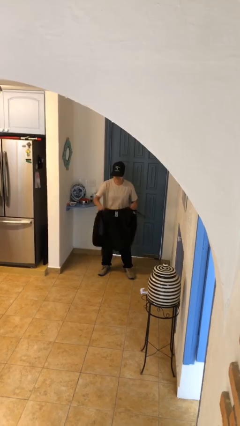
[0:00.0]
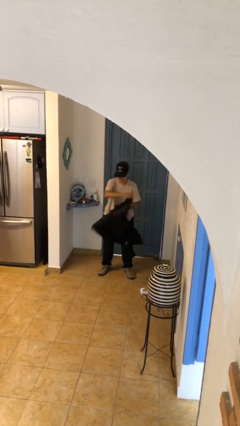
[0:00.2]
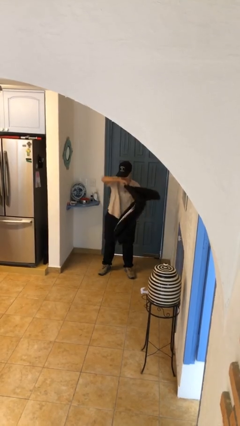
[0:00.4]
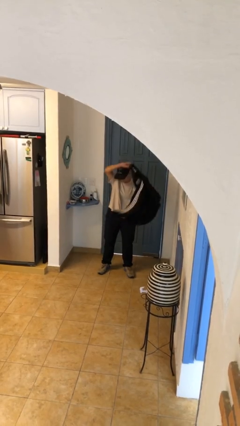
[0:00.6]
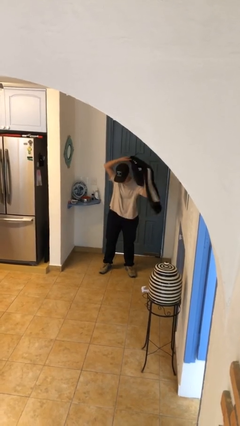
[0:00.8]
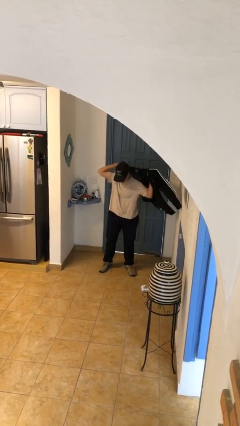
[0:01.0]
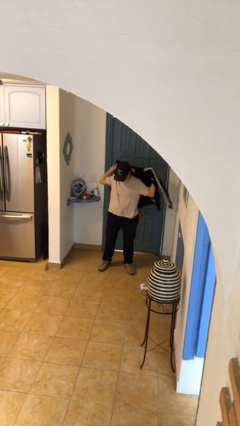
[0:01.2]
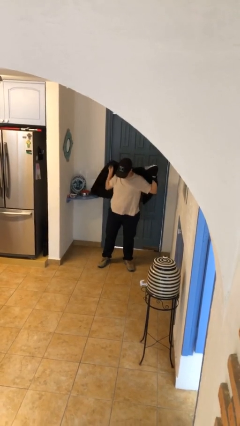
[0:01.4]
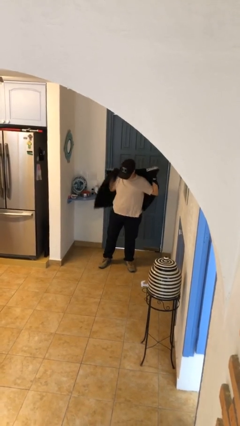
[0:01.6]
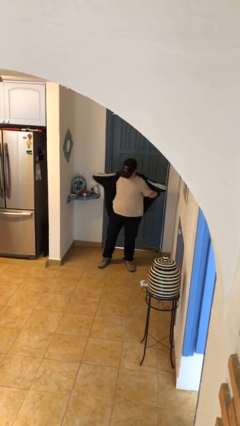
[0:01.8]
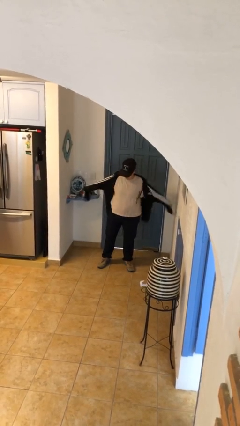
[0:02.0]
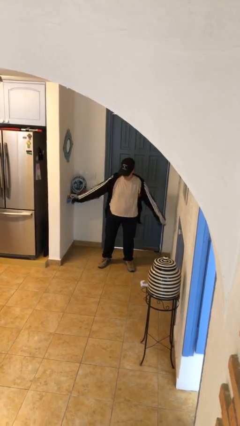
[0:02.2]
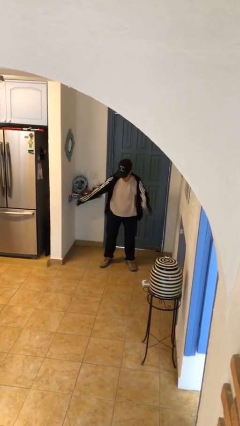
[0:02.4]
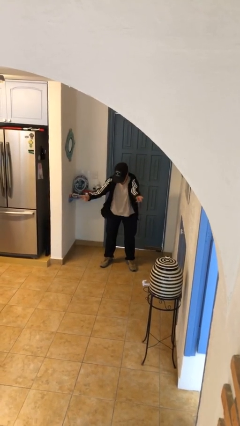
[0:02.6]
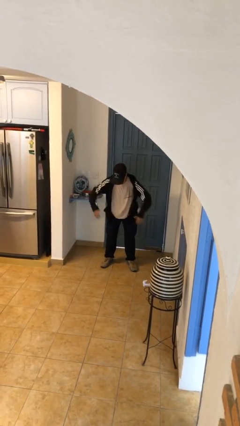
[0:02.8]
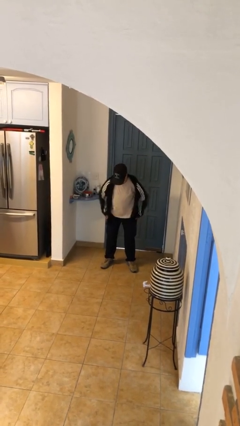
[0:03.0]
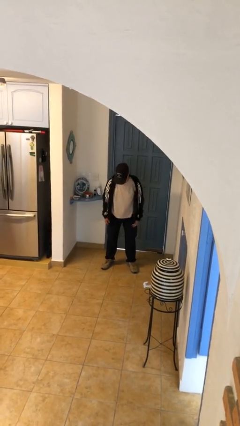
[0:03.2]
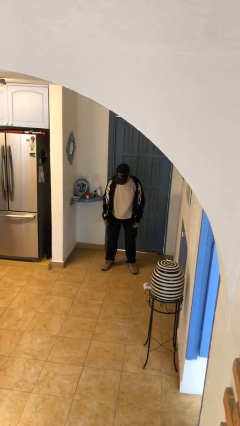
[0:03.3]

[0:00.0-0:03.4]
person puts on jacket

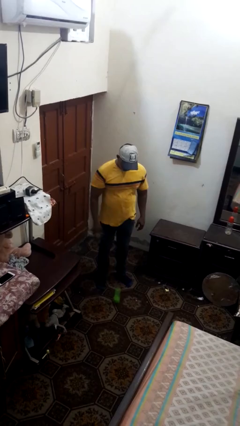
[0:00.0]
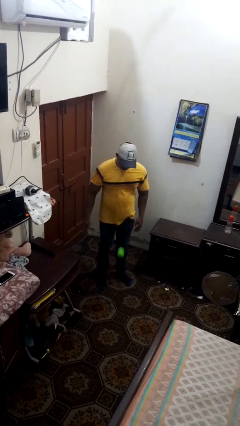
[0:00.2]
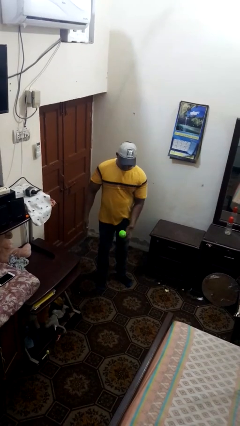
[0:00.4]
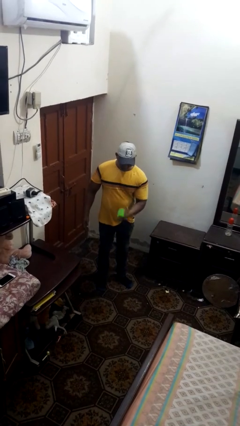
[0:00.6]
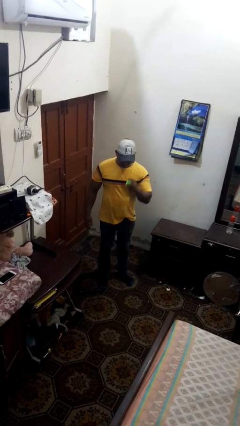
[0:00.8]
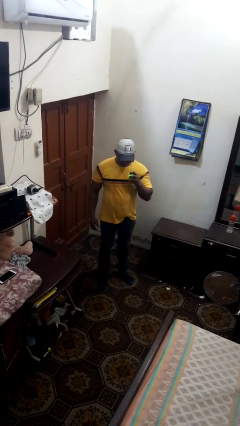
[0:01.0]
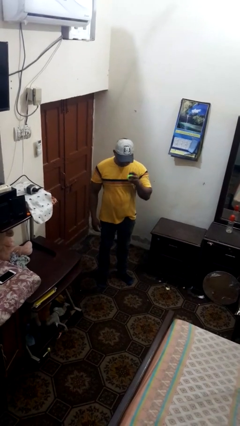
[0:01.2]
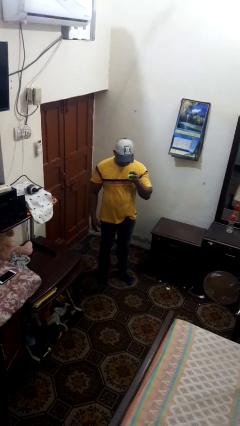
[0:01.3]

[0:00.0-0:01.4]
person bounces ball on floor

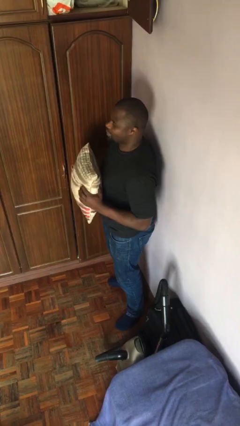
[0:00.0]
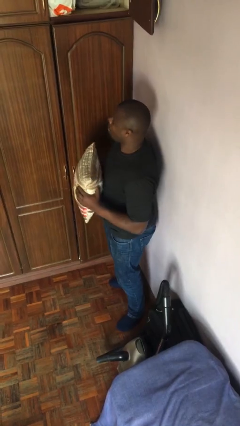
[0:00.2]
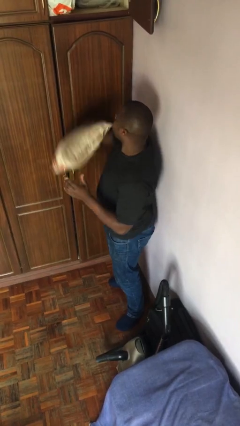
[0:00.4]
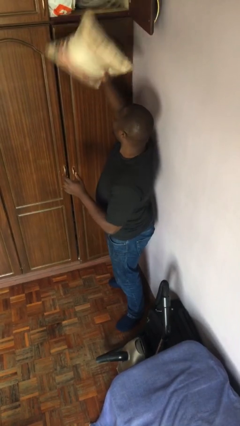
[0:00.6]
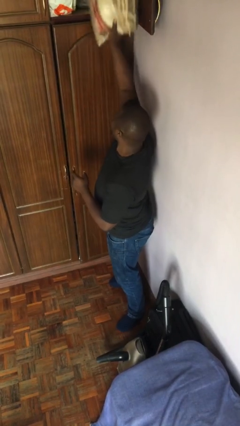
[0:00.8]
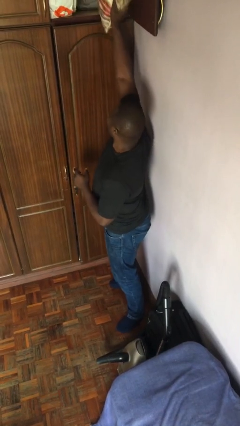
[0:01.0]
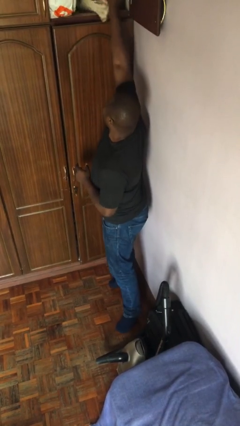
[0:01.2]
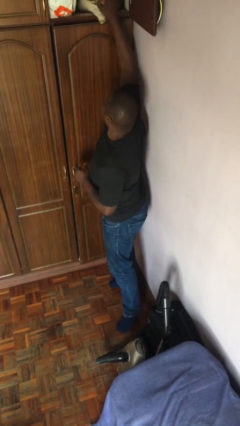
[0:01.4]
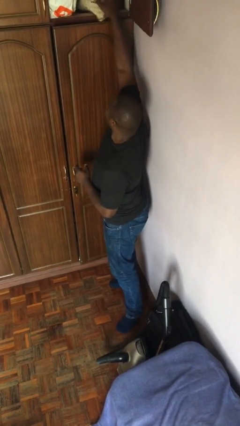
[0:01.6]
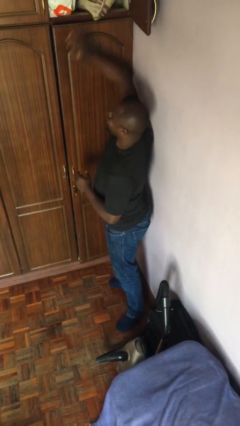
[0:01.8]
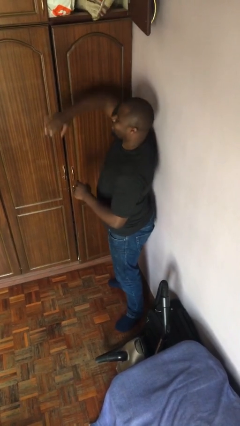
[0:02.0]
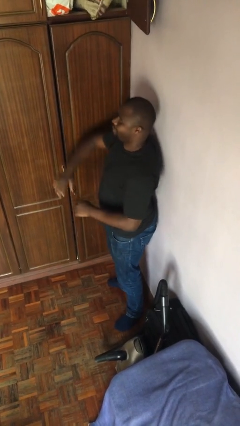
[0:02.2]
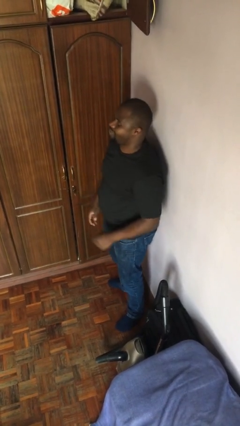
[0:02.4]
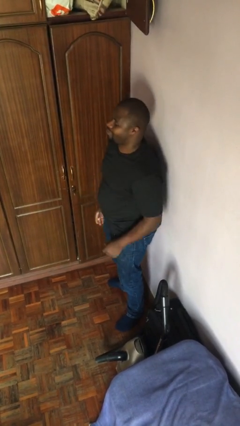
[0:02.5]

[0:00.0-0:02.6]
person puts down object on shelf

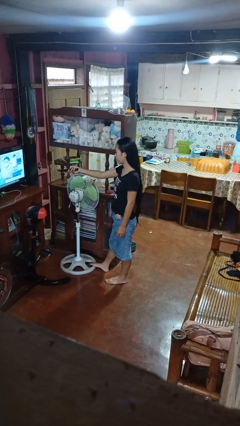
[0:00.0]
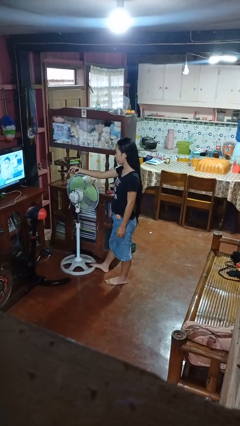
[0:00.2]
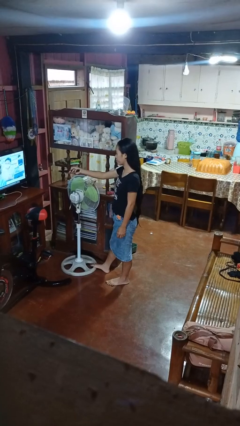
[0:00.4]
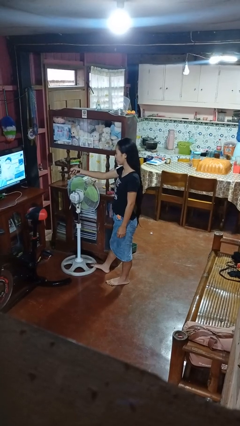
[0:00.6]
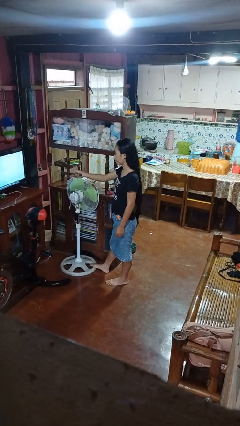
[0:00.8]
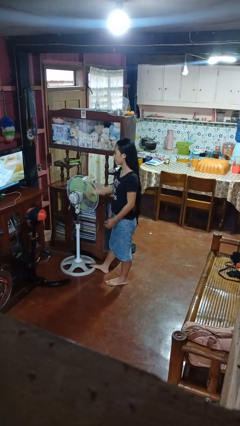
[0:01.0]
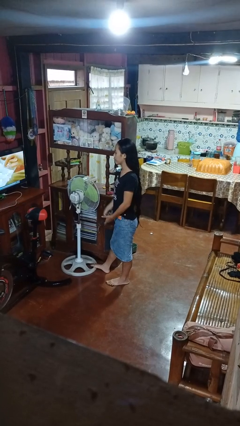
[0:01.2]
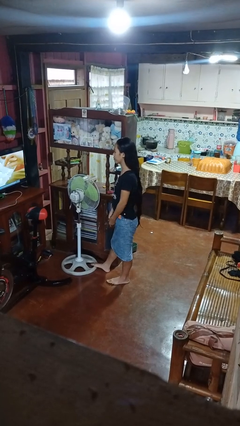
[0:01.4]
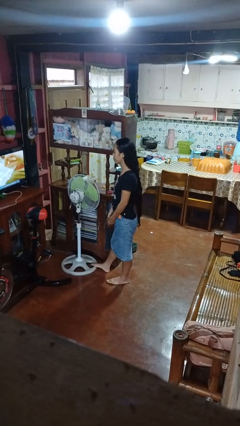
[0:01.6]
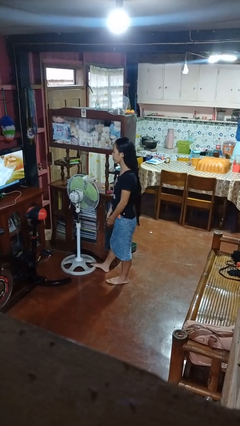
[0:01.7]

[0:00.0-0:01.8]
person uses television remote

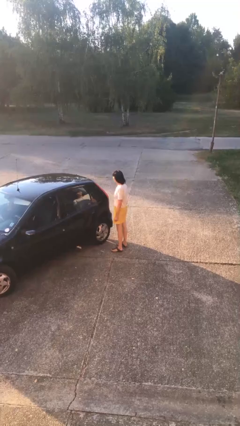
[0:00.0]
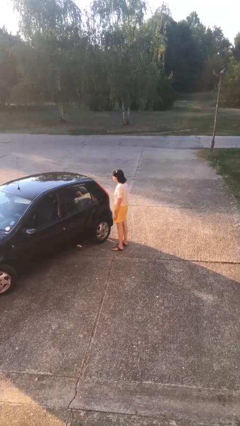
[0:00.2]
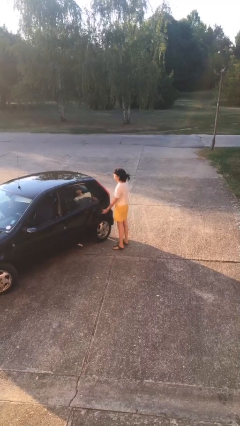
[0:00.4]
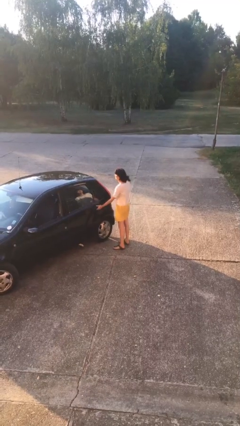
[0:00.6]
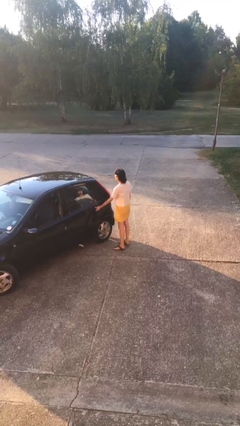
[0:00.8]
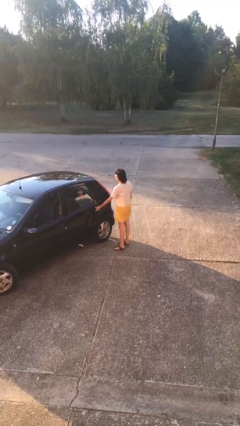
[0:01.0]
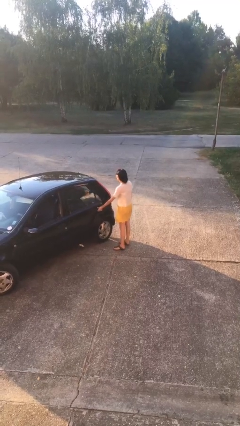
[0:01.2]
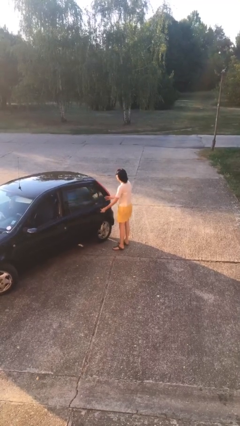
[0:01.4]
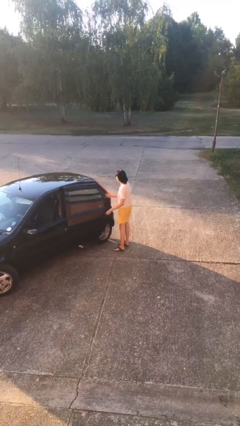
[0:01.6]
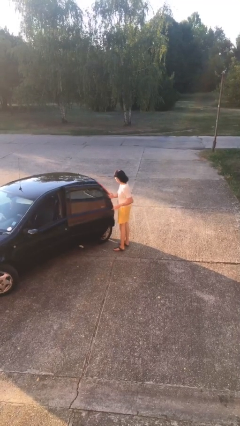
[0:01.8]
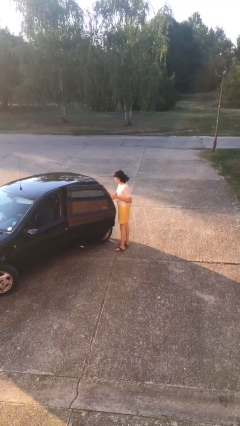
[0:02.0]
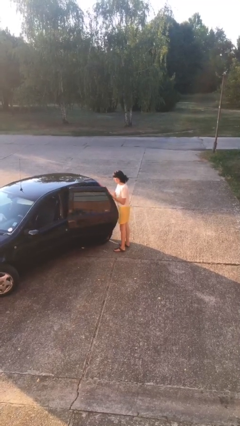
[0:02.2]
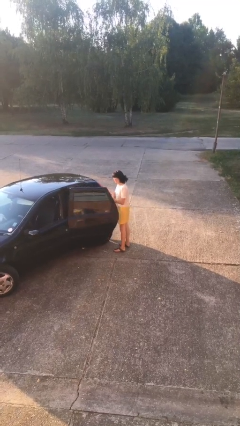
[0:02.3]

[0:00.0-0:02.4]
person opens car door

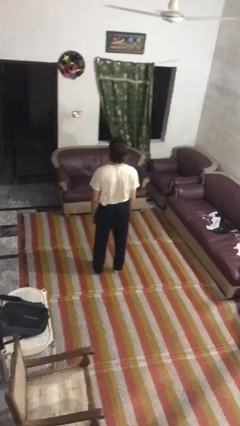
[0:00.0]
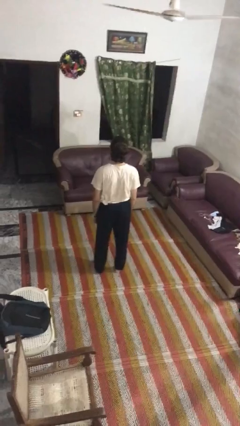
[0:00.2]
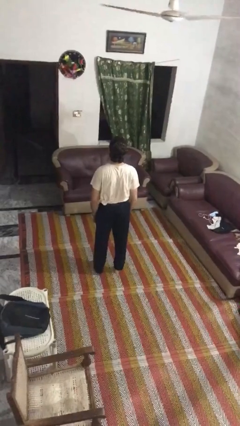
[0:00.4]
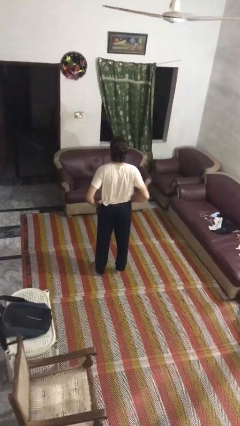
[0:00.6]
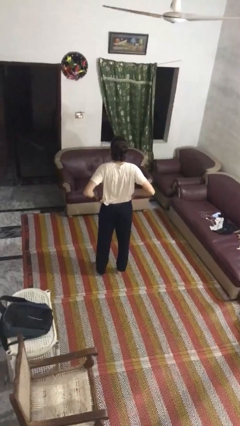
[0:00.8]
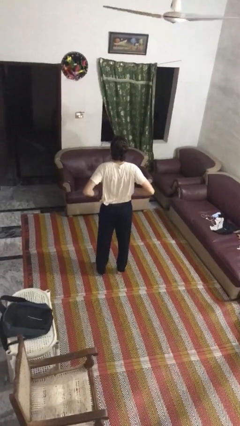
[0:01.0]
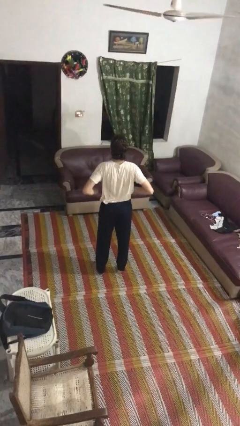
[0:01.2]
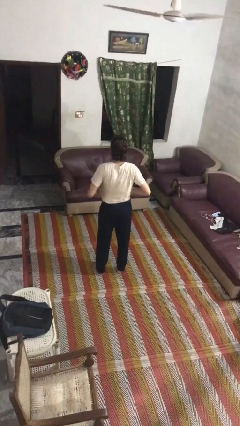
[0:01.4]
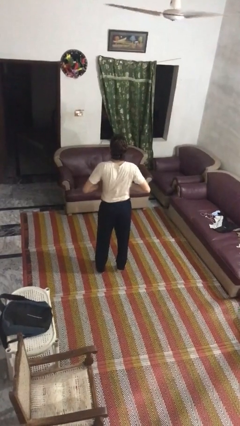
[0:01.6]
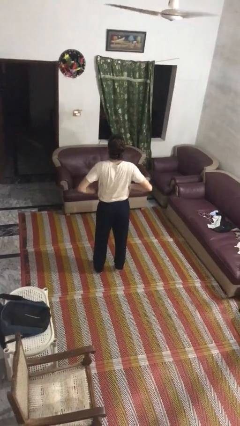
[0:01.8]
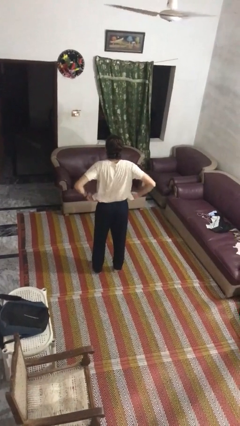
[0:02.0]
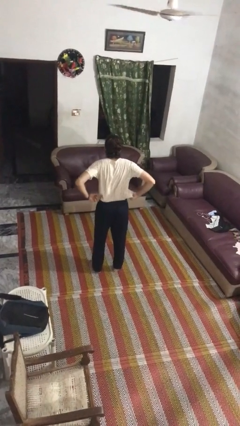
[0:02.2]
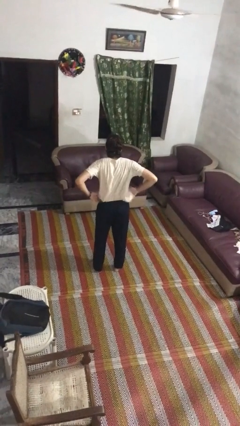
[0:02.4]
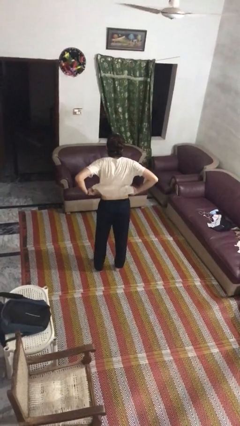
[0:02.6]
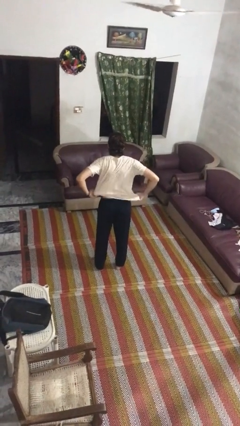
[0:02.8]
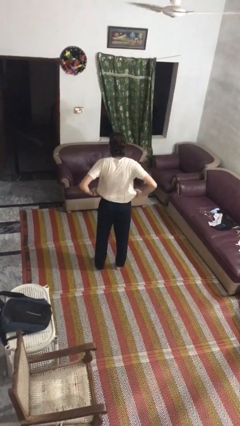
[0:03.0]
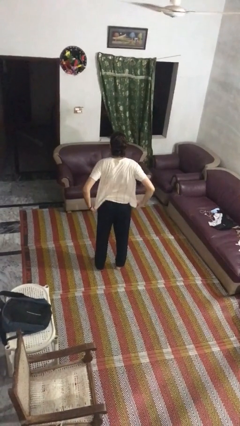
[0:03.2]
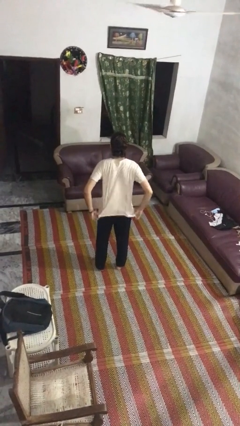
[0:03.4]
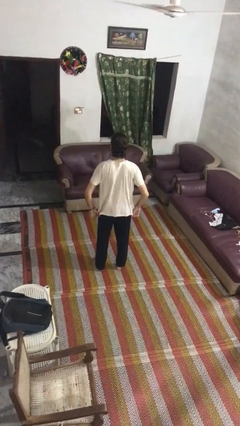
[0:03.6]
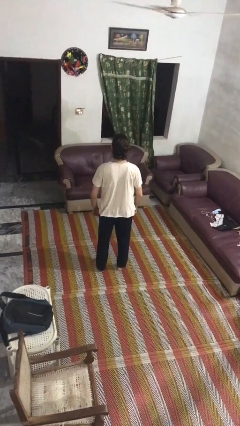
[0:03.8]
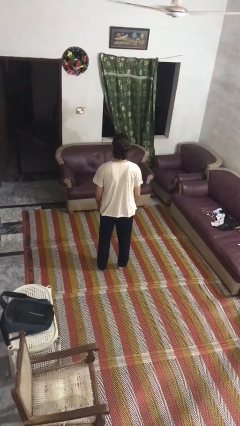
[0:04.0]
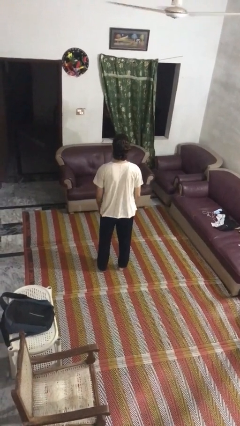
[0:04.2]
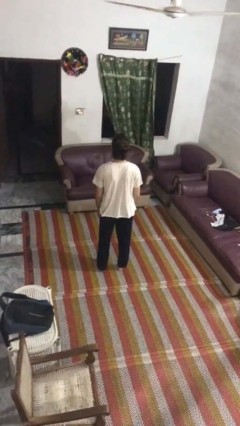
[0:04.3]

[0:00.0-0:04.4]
person untucks shirt

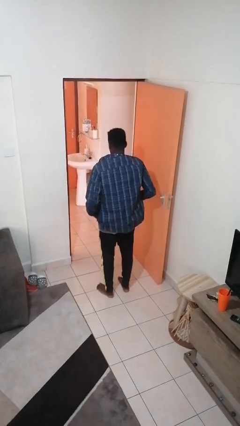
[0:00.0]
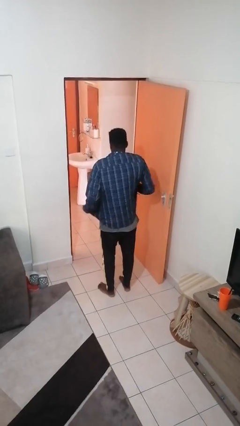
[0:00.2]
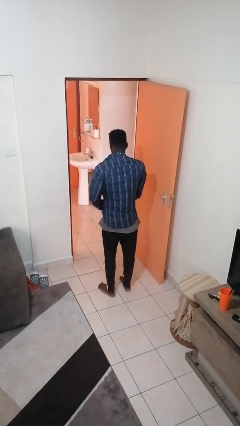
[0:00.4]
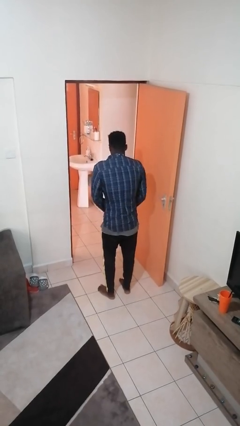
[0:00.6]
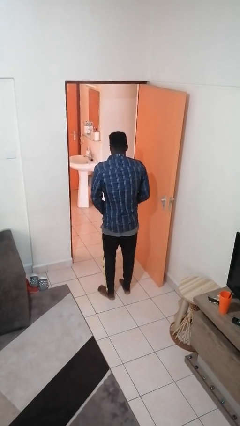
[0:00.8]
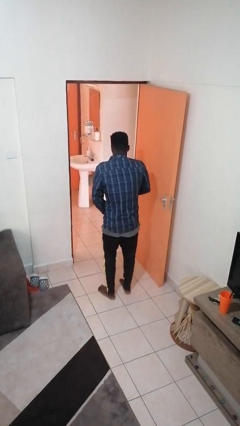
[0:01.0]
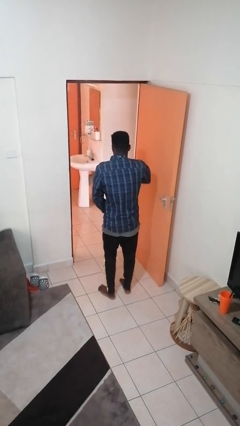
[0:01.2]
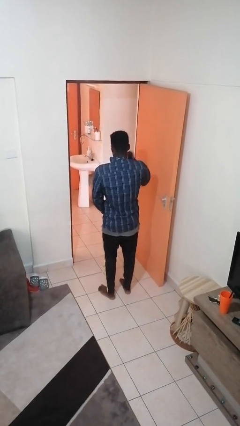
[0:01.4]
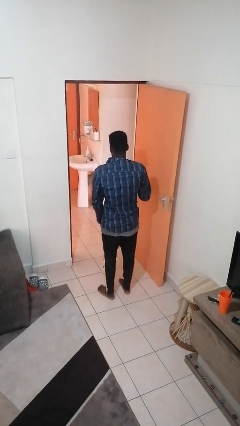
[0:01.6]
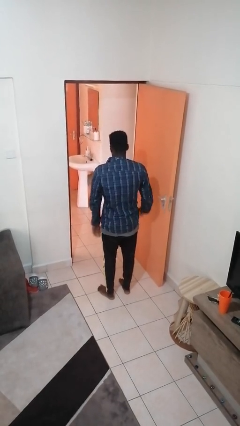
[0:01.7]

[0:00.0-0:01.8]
person zips up jacket
